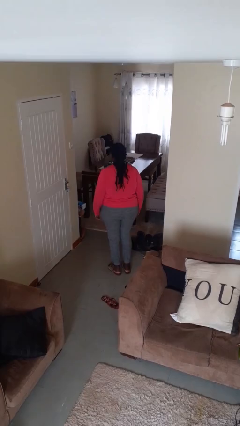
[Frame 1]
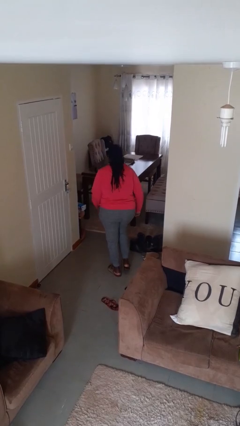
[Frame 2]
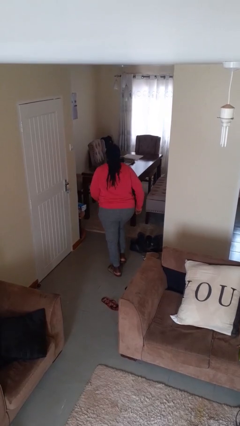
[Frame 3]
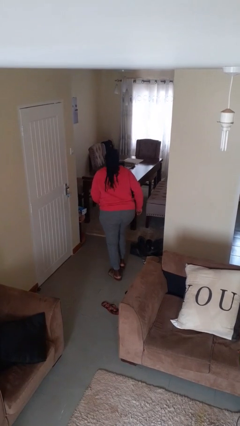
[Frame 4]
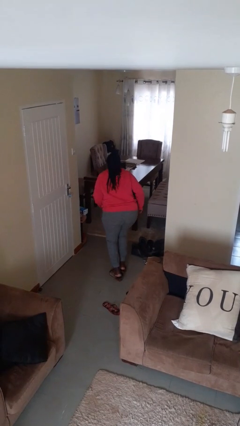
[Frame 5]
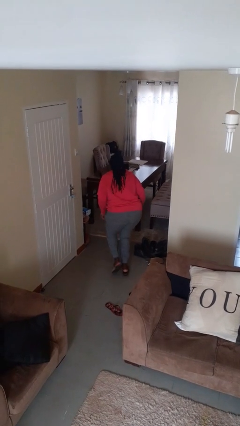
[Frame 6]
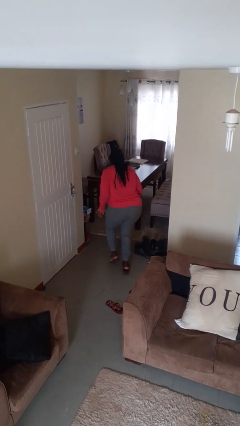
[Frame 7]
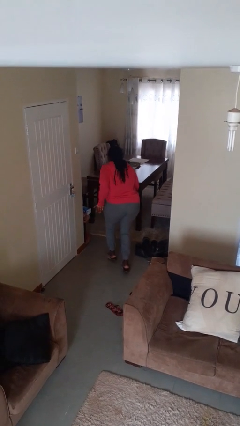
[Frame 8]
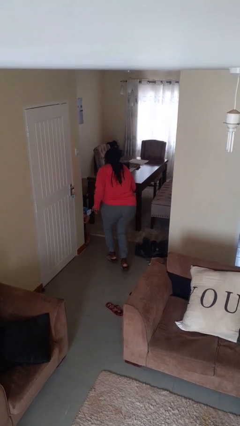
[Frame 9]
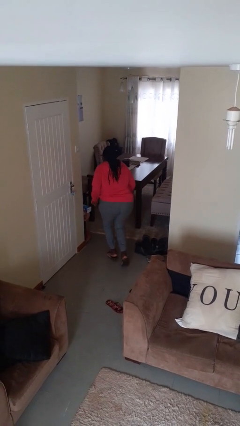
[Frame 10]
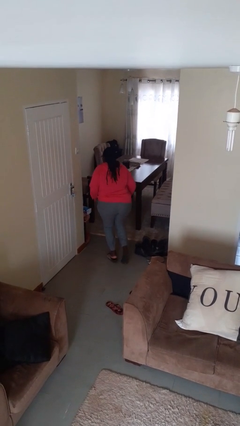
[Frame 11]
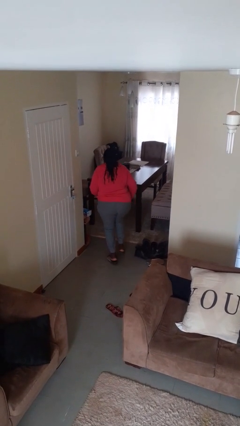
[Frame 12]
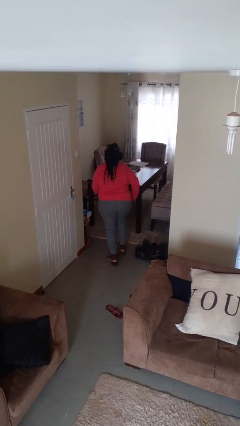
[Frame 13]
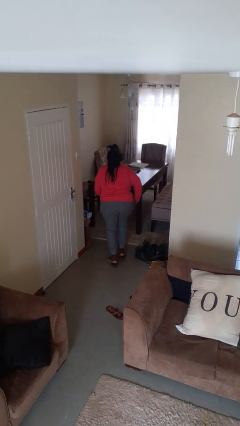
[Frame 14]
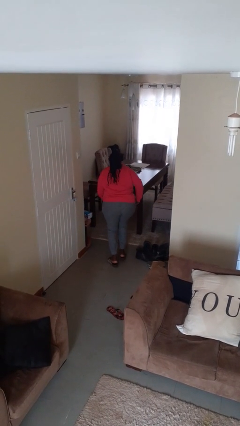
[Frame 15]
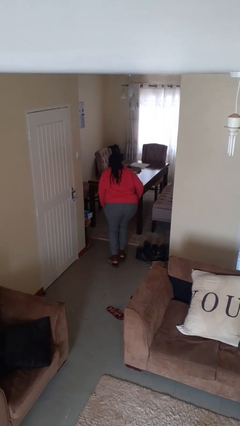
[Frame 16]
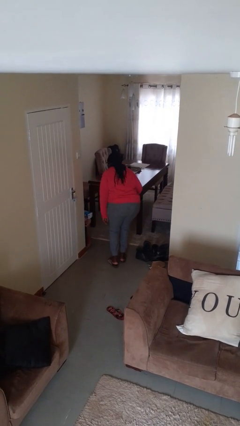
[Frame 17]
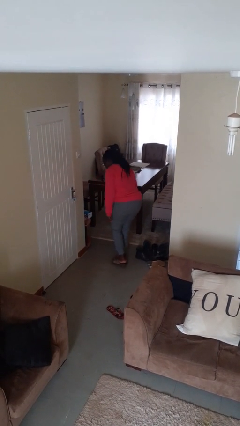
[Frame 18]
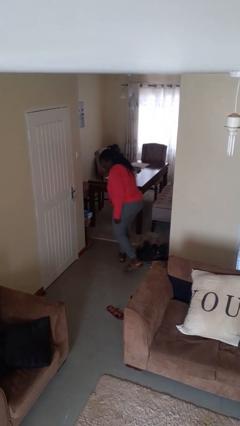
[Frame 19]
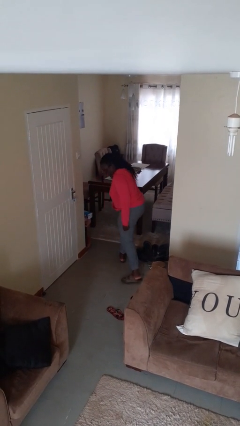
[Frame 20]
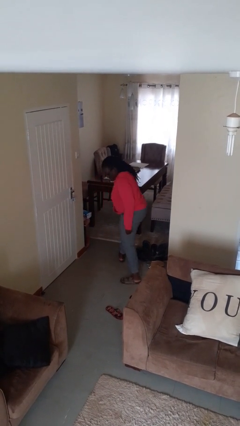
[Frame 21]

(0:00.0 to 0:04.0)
person walks tiptoe

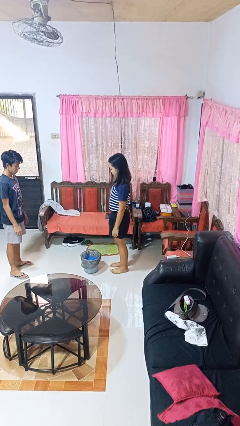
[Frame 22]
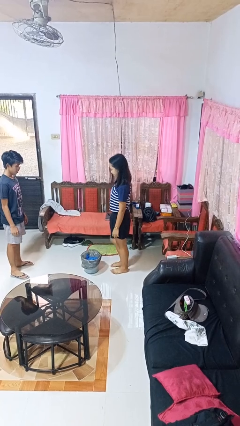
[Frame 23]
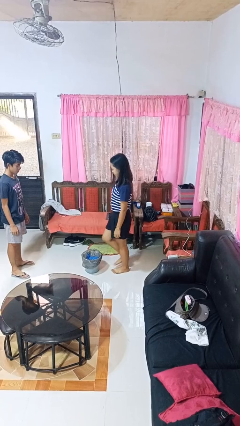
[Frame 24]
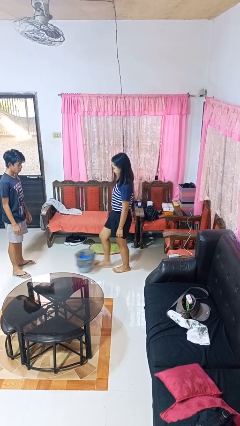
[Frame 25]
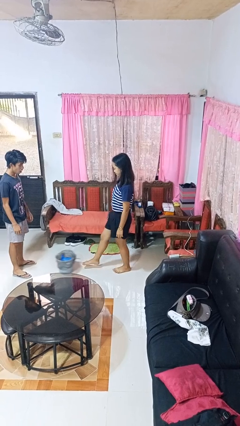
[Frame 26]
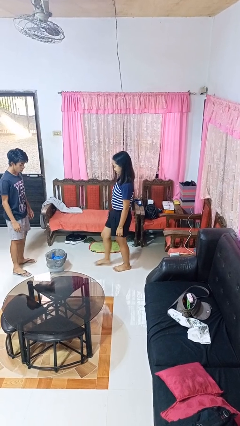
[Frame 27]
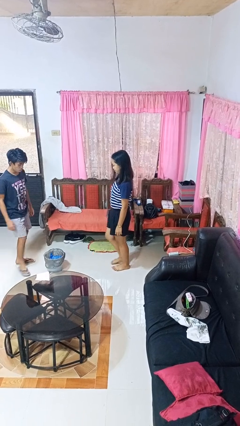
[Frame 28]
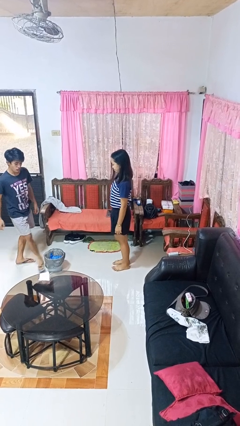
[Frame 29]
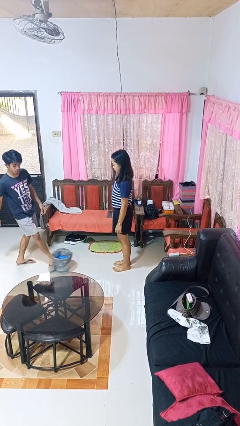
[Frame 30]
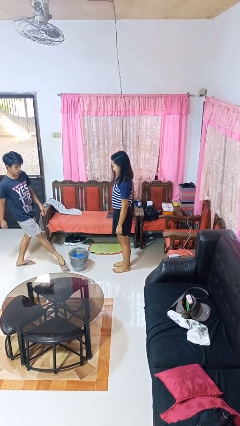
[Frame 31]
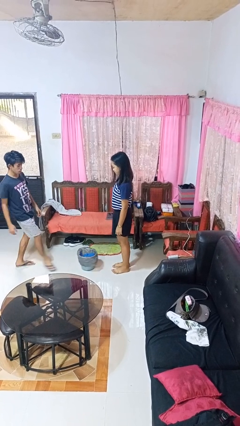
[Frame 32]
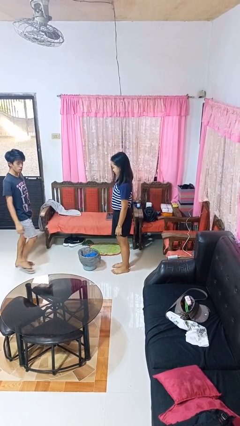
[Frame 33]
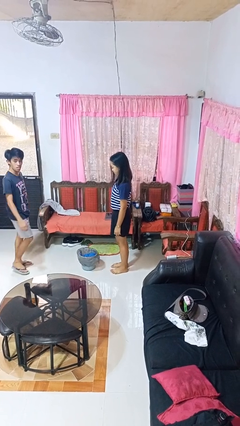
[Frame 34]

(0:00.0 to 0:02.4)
person kicks object to person

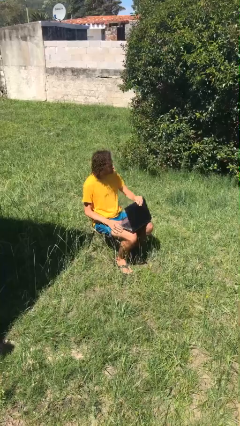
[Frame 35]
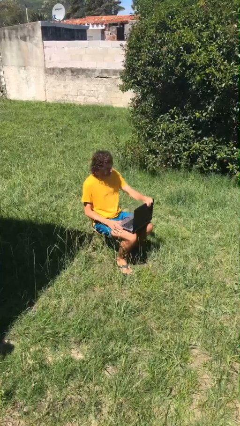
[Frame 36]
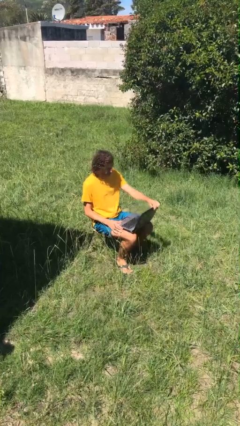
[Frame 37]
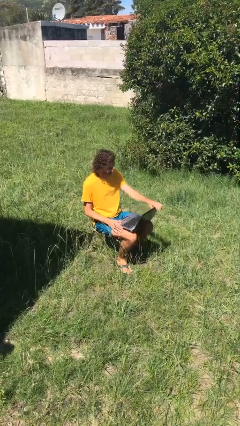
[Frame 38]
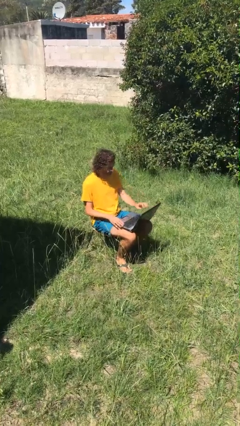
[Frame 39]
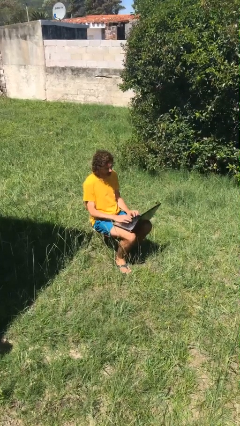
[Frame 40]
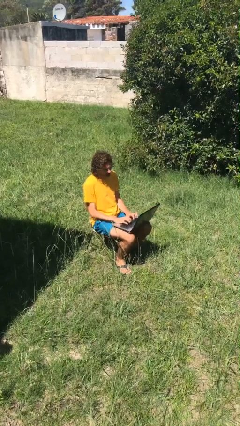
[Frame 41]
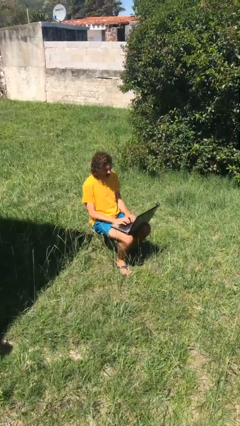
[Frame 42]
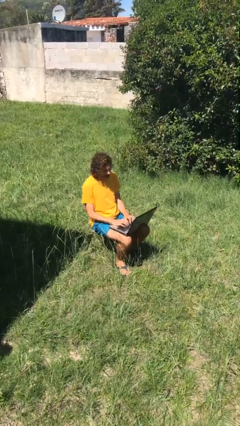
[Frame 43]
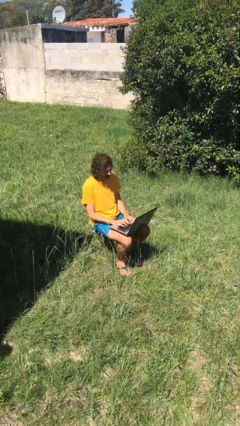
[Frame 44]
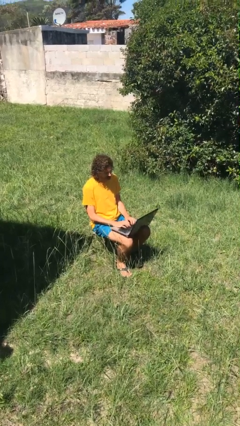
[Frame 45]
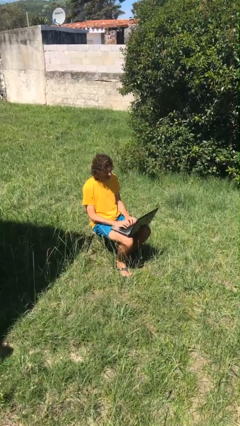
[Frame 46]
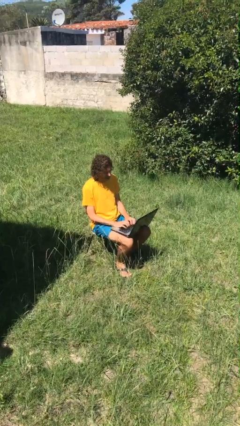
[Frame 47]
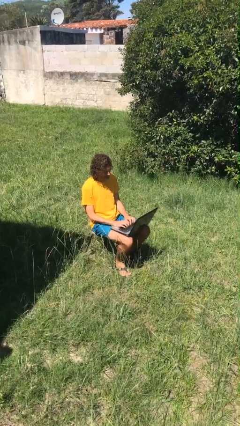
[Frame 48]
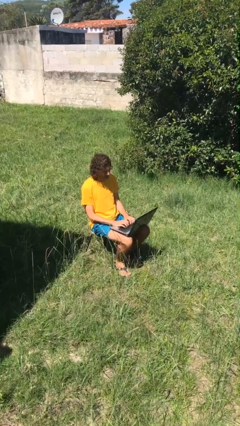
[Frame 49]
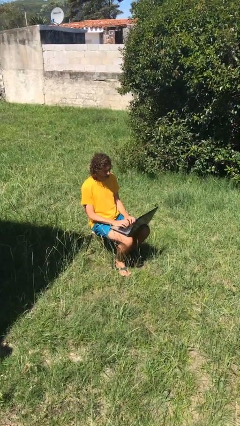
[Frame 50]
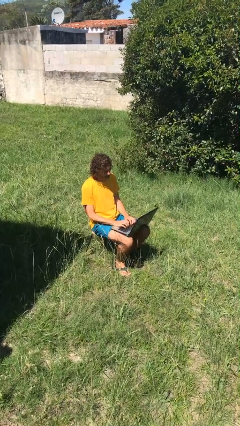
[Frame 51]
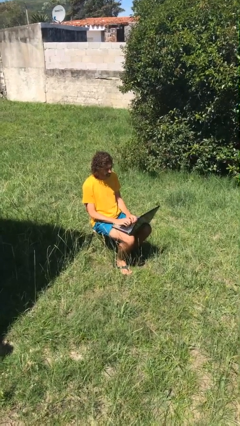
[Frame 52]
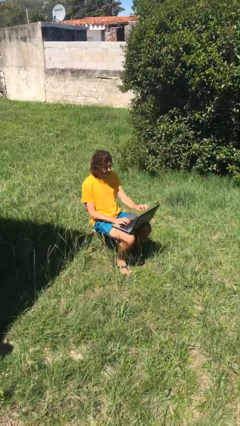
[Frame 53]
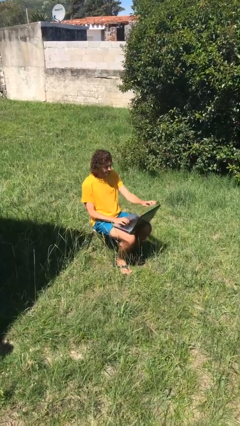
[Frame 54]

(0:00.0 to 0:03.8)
person interacts with laptop

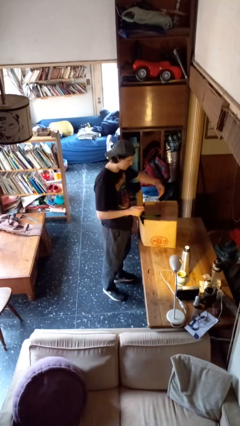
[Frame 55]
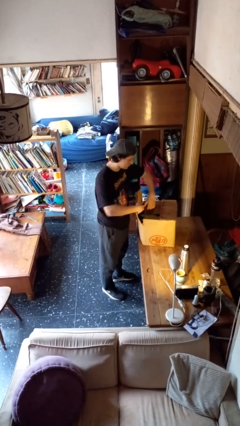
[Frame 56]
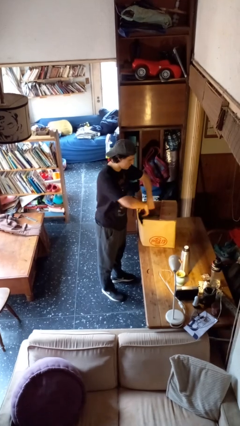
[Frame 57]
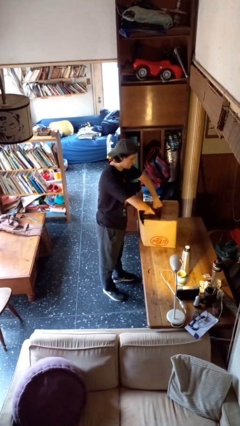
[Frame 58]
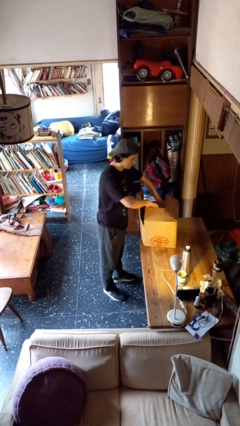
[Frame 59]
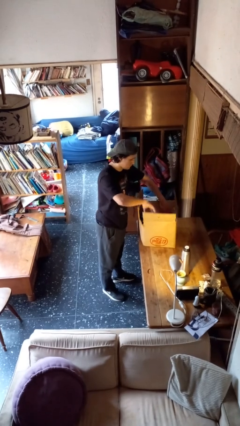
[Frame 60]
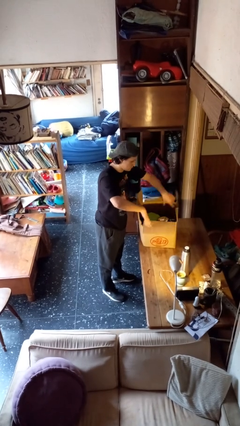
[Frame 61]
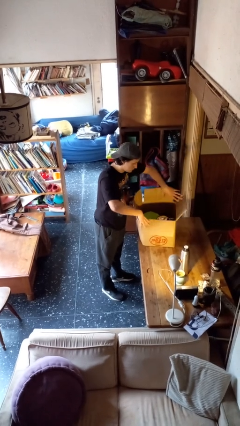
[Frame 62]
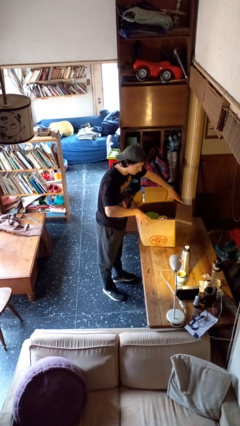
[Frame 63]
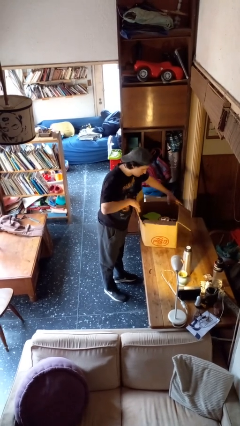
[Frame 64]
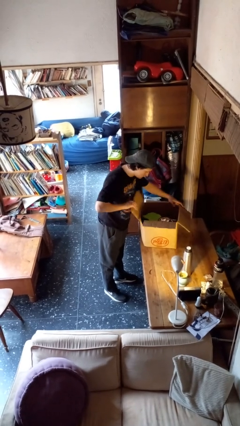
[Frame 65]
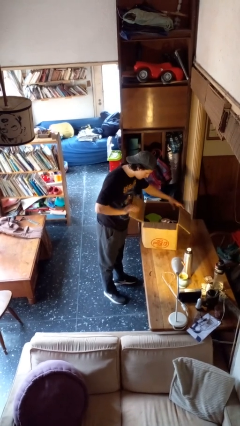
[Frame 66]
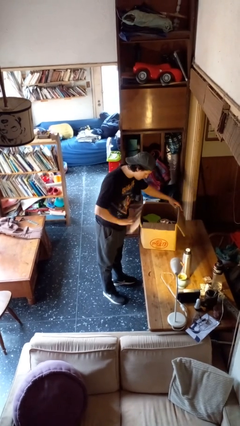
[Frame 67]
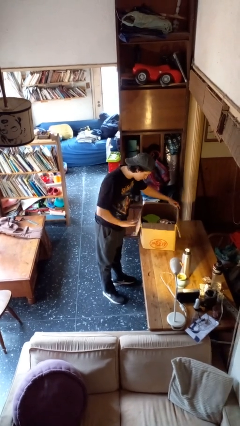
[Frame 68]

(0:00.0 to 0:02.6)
person opens box

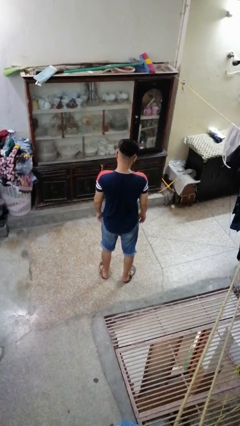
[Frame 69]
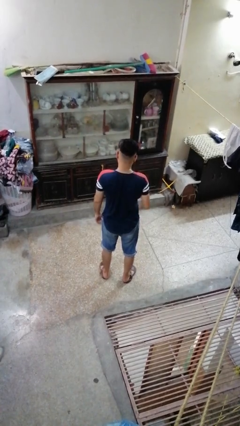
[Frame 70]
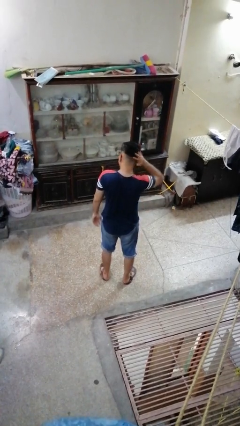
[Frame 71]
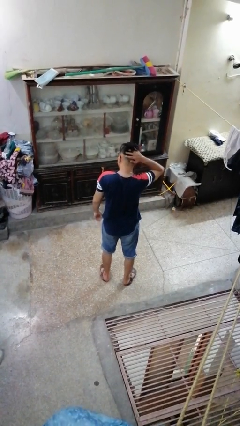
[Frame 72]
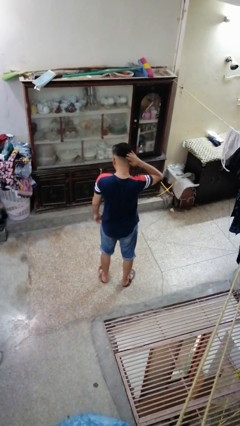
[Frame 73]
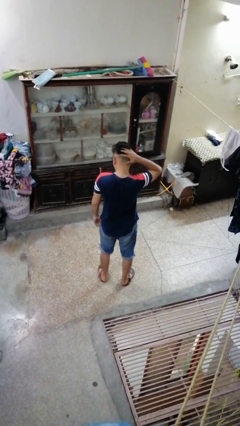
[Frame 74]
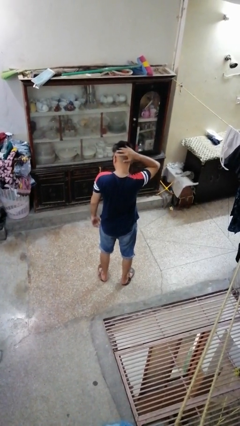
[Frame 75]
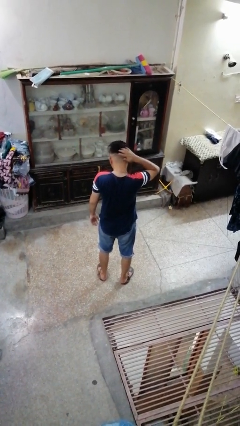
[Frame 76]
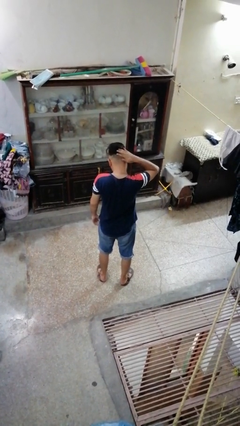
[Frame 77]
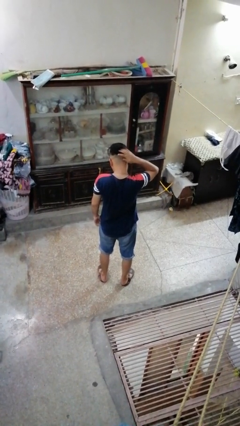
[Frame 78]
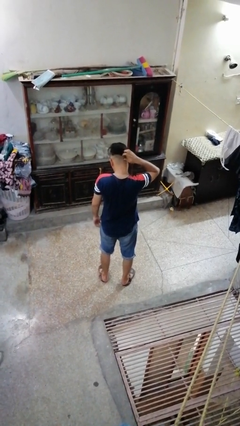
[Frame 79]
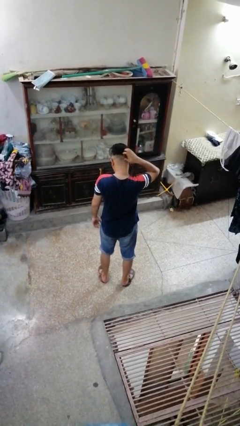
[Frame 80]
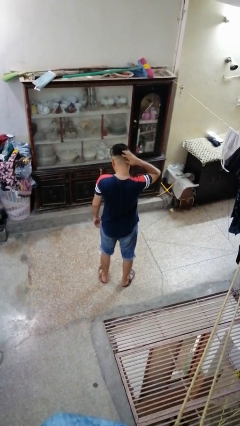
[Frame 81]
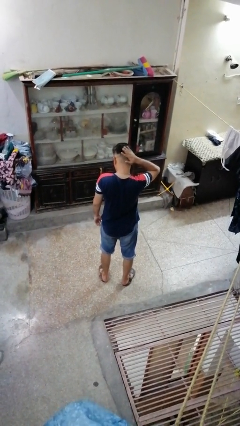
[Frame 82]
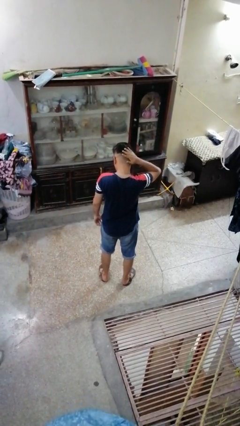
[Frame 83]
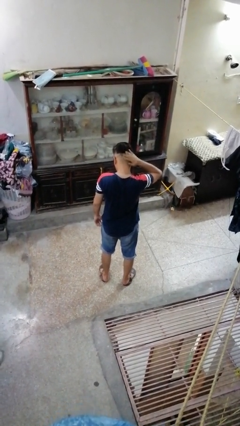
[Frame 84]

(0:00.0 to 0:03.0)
person swats bug

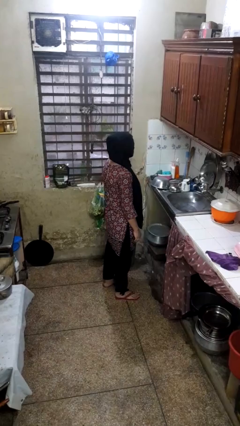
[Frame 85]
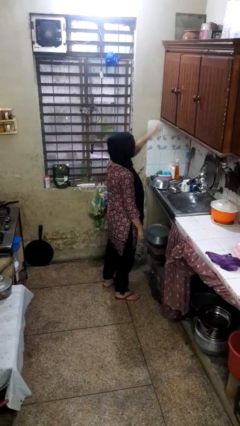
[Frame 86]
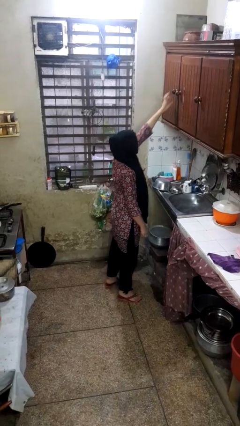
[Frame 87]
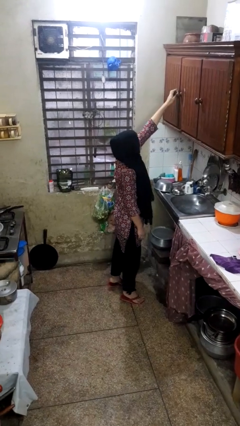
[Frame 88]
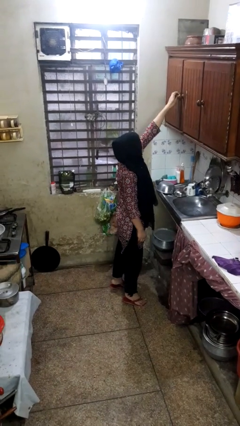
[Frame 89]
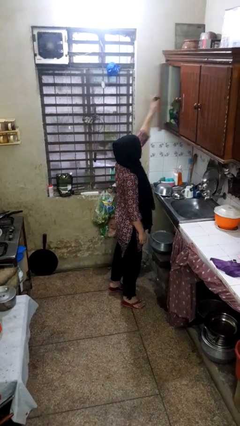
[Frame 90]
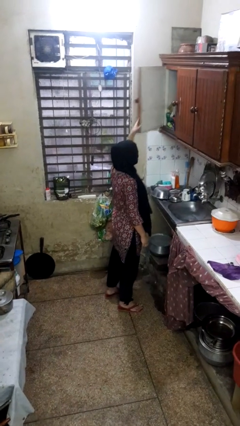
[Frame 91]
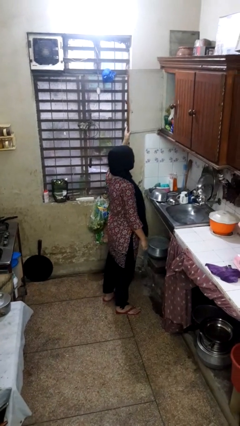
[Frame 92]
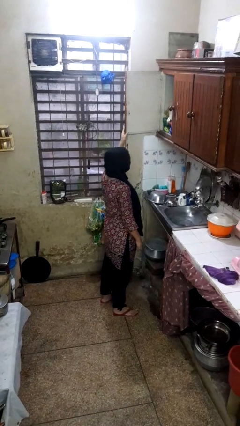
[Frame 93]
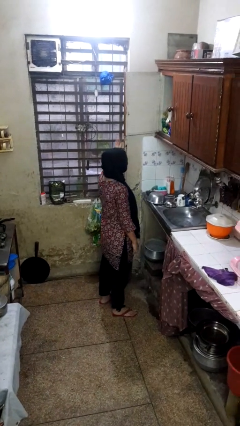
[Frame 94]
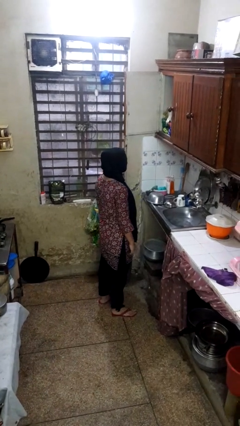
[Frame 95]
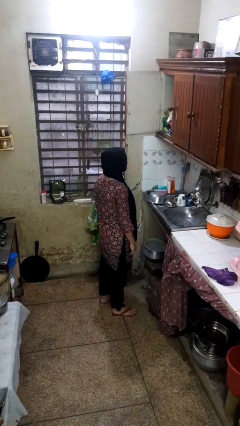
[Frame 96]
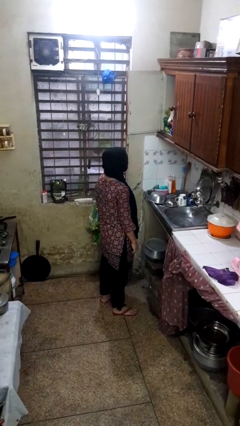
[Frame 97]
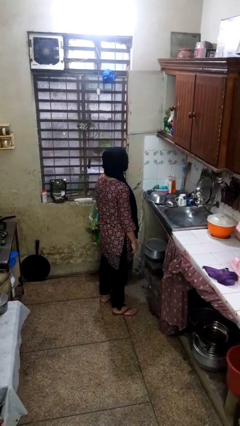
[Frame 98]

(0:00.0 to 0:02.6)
person opens cabinet
